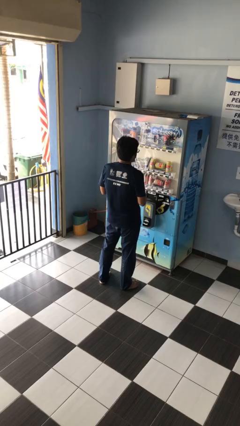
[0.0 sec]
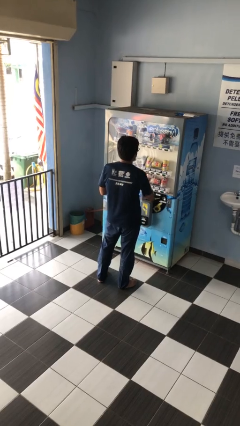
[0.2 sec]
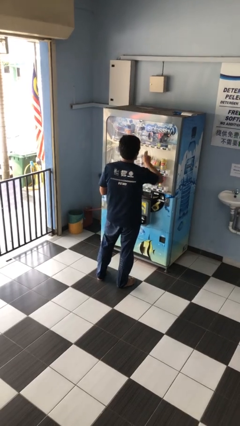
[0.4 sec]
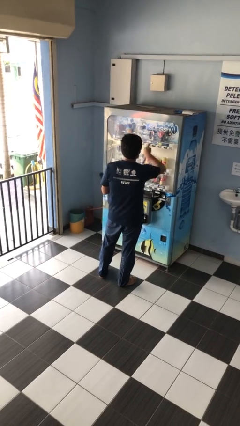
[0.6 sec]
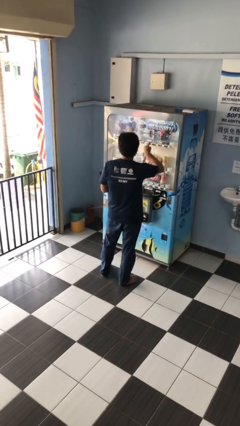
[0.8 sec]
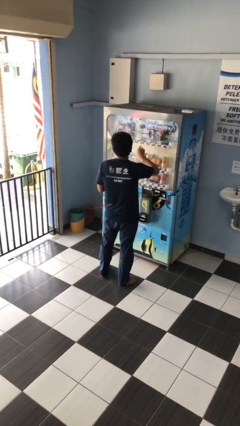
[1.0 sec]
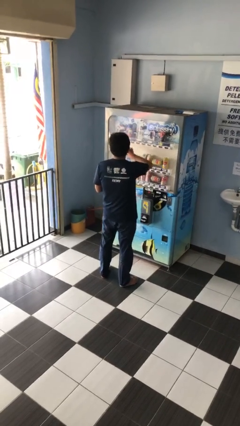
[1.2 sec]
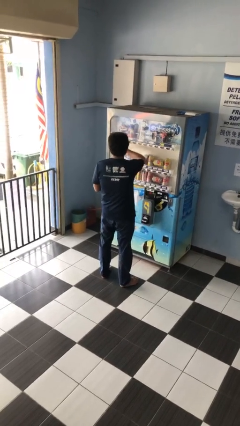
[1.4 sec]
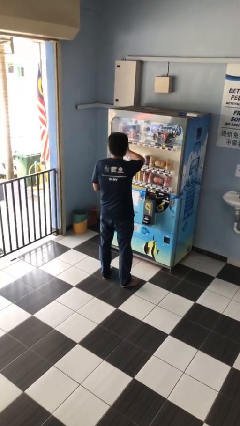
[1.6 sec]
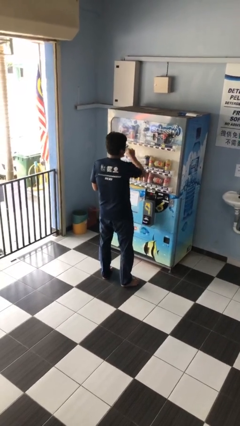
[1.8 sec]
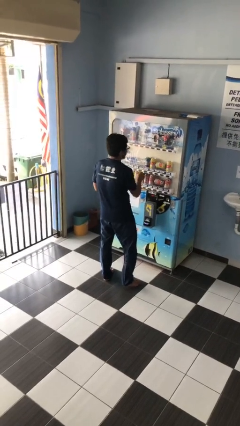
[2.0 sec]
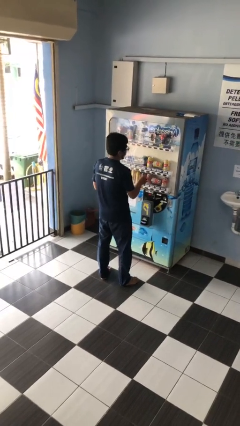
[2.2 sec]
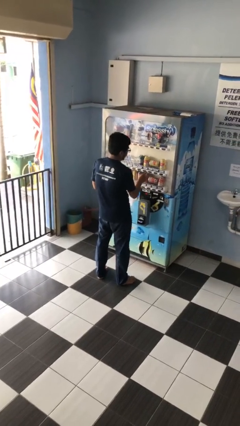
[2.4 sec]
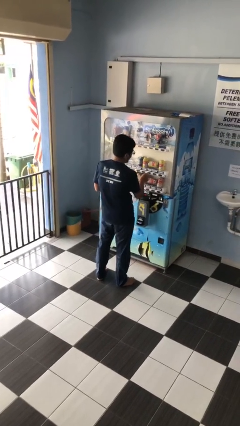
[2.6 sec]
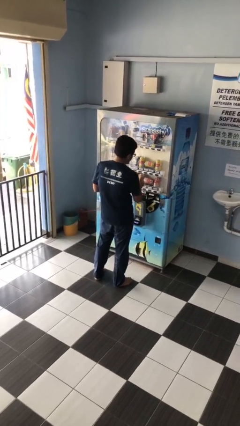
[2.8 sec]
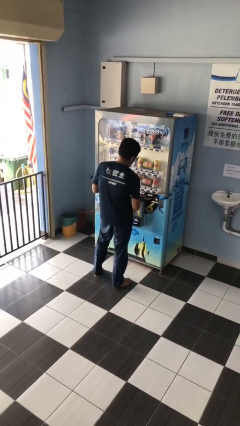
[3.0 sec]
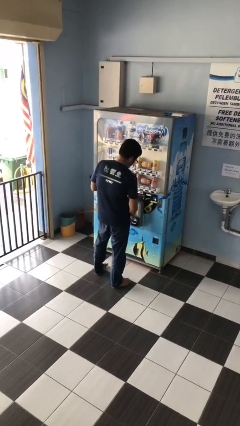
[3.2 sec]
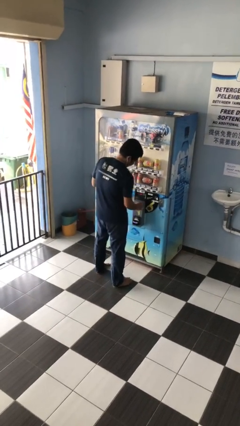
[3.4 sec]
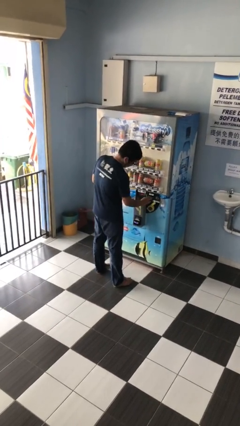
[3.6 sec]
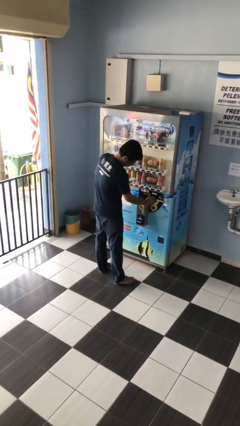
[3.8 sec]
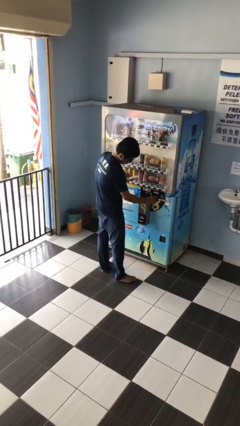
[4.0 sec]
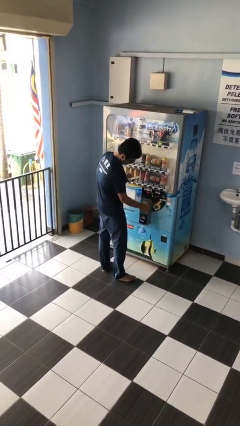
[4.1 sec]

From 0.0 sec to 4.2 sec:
person purchases from machine

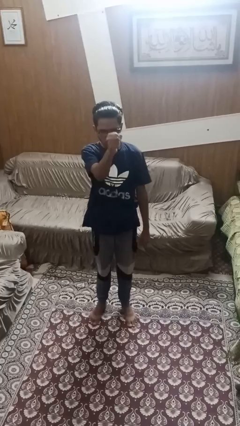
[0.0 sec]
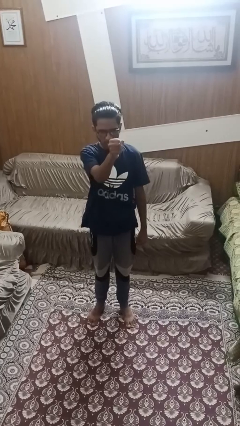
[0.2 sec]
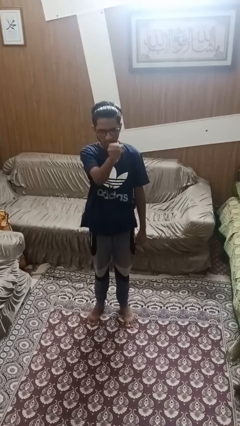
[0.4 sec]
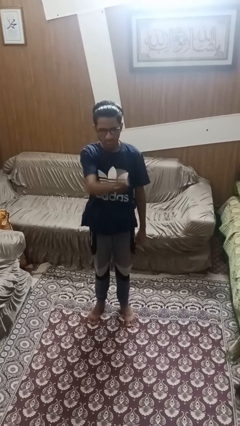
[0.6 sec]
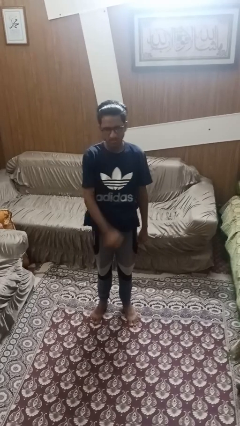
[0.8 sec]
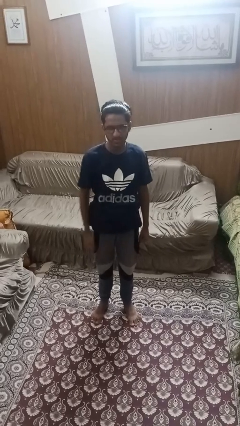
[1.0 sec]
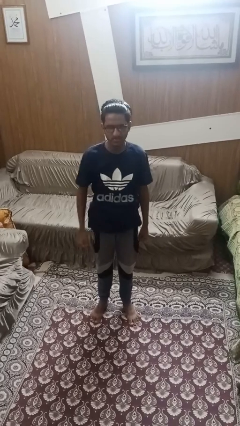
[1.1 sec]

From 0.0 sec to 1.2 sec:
person punches

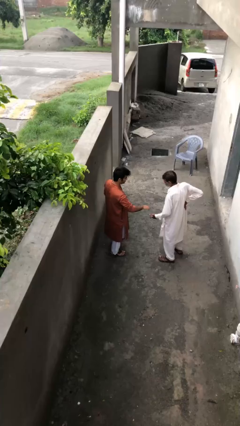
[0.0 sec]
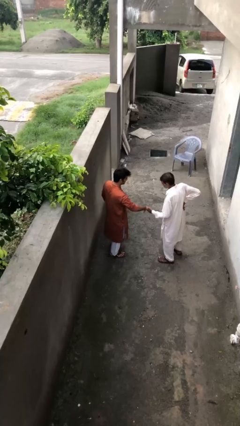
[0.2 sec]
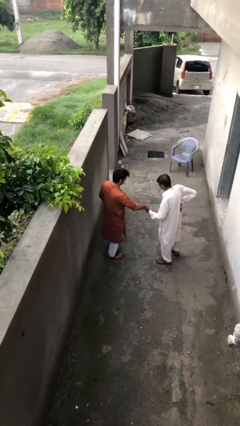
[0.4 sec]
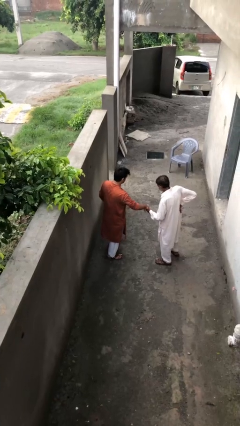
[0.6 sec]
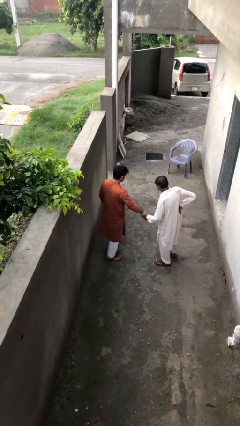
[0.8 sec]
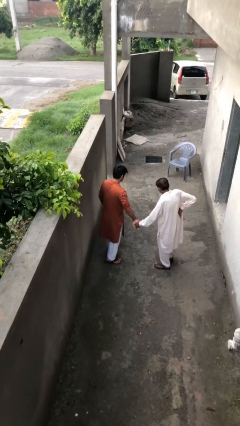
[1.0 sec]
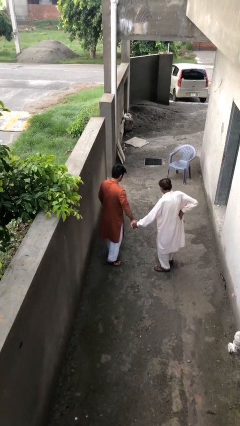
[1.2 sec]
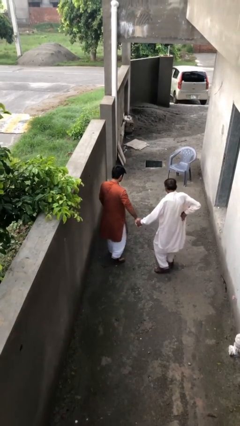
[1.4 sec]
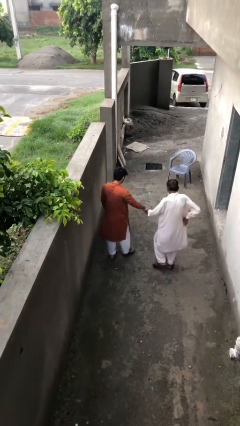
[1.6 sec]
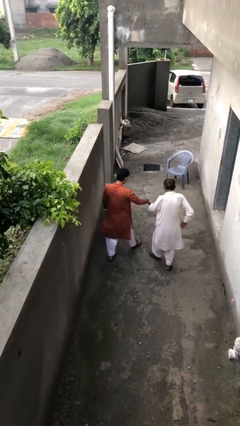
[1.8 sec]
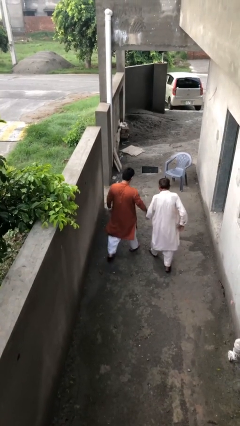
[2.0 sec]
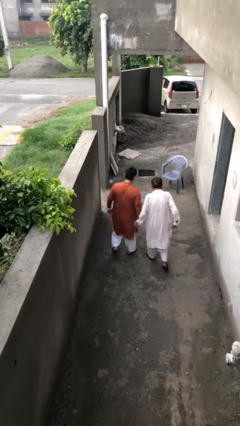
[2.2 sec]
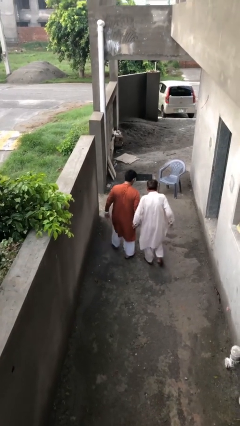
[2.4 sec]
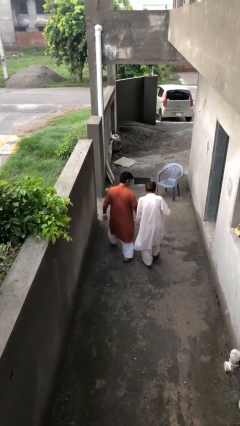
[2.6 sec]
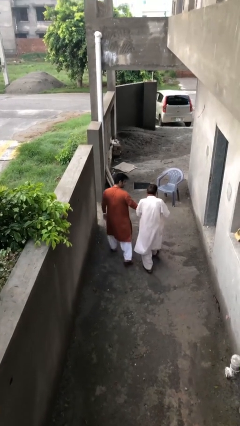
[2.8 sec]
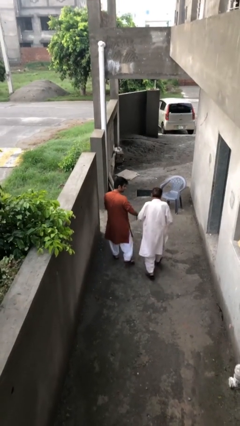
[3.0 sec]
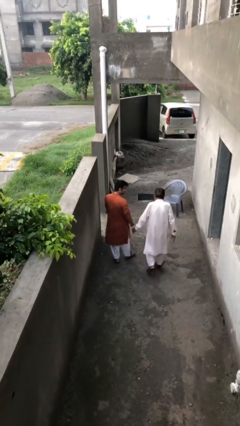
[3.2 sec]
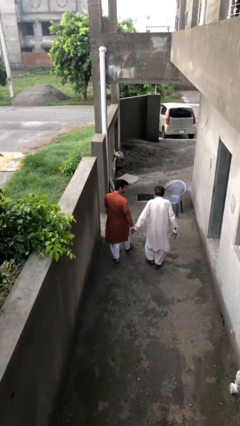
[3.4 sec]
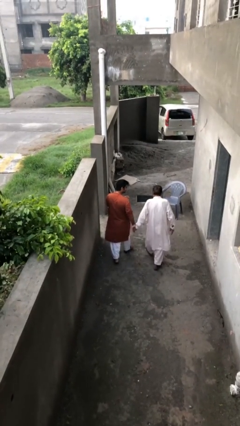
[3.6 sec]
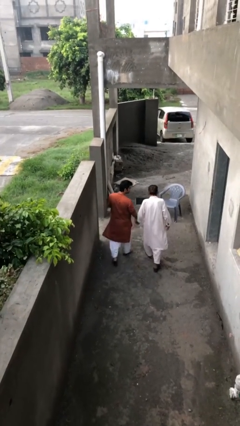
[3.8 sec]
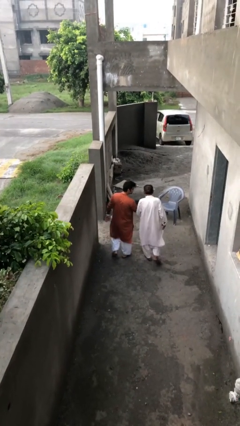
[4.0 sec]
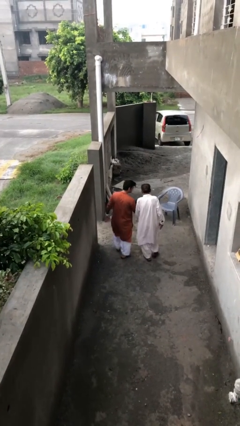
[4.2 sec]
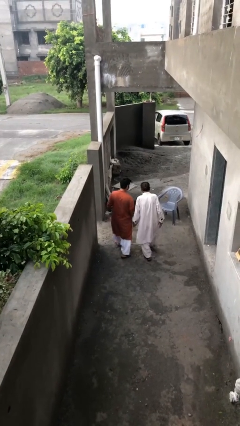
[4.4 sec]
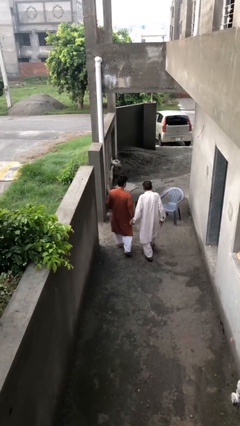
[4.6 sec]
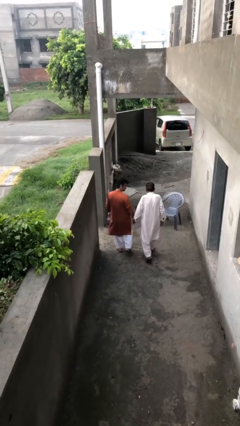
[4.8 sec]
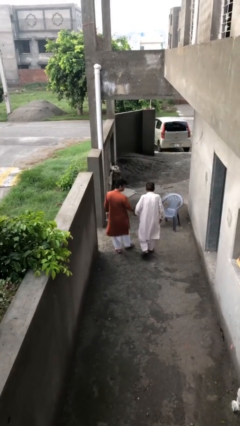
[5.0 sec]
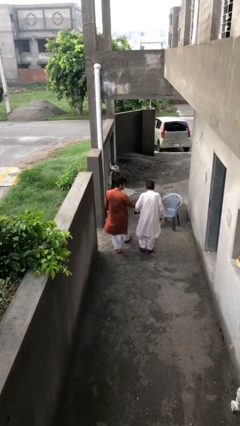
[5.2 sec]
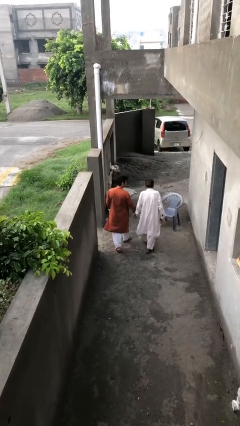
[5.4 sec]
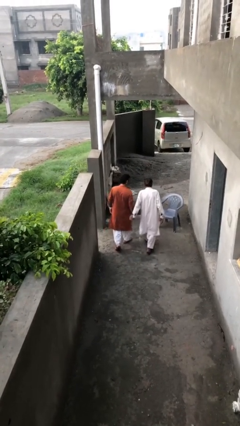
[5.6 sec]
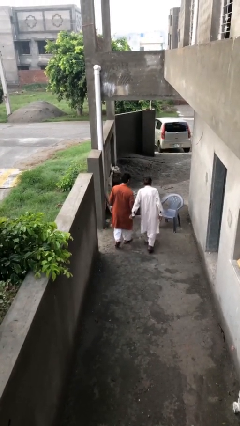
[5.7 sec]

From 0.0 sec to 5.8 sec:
person holds hand

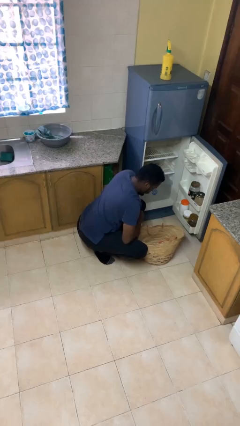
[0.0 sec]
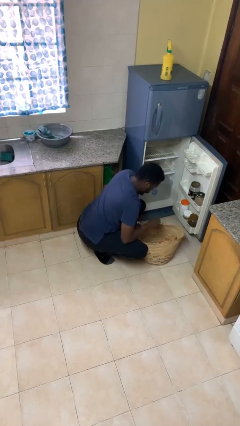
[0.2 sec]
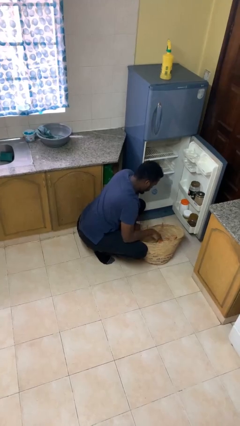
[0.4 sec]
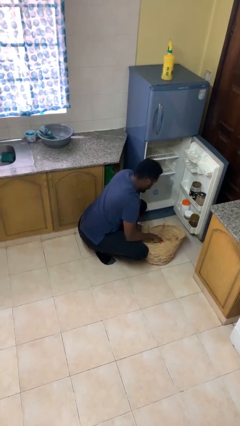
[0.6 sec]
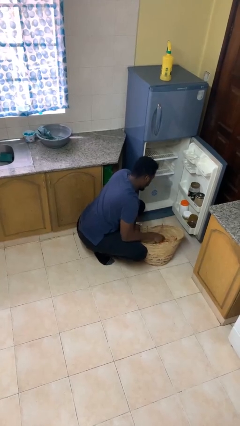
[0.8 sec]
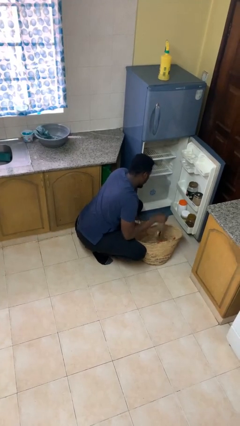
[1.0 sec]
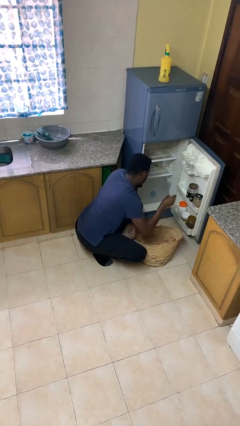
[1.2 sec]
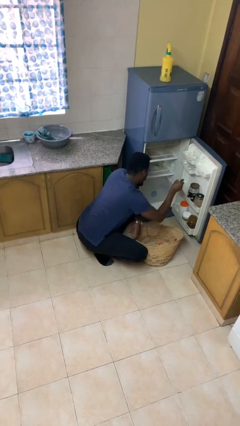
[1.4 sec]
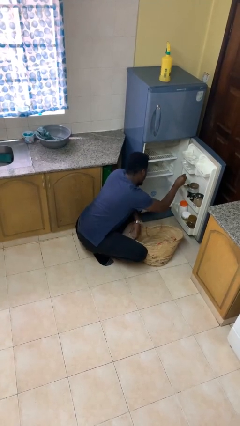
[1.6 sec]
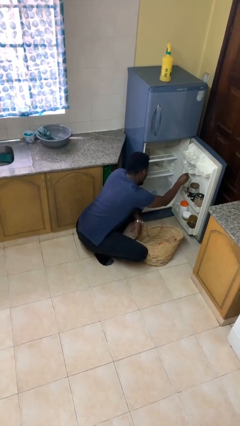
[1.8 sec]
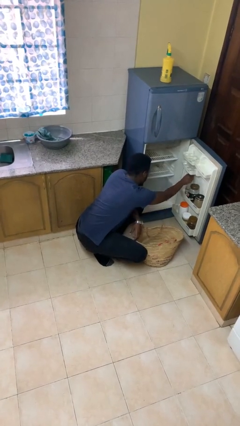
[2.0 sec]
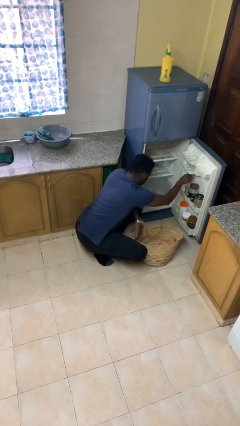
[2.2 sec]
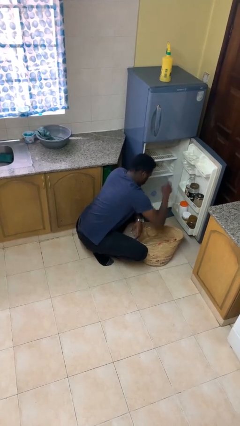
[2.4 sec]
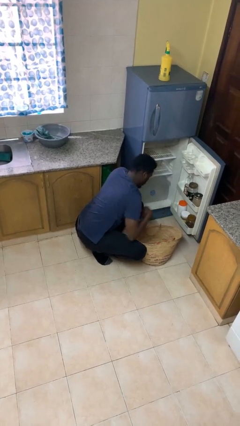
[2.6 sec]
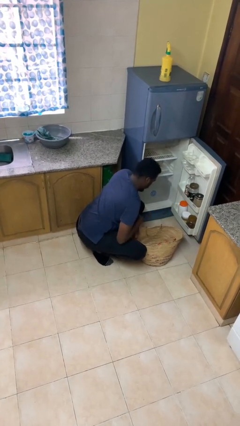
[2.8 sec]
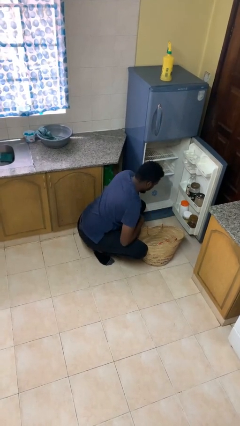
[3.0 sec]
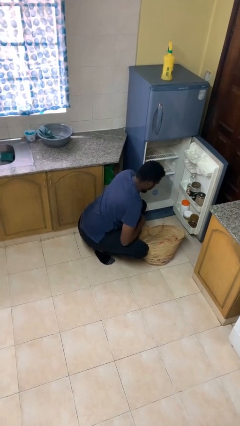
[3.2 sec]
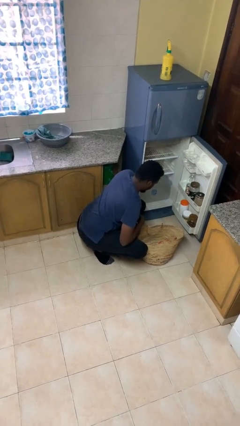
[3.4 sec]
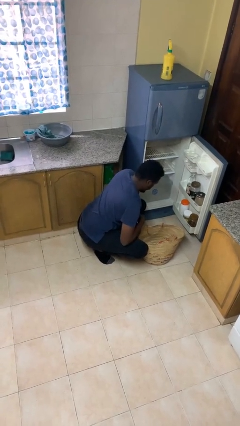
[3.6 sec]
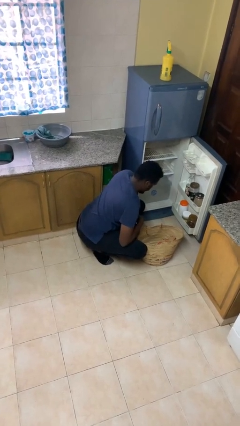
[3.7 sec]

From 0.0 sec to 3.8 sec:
person loads groceries into refrigerator

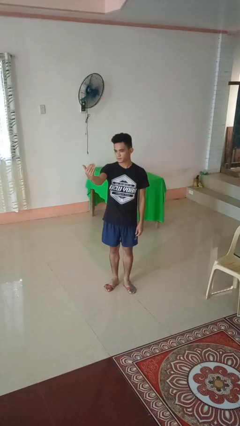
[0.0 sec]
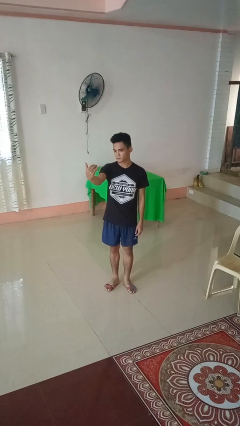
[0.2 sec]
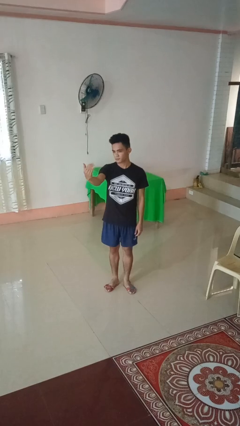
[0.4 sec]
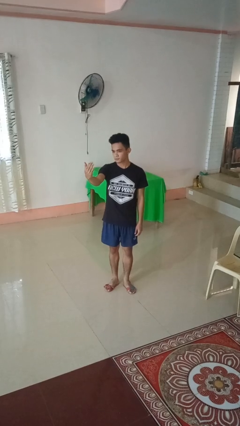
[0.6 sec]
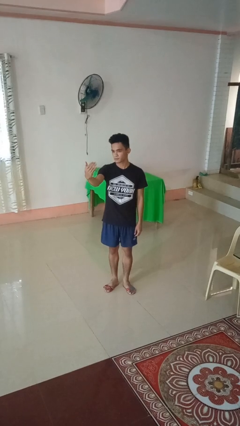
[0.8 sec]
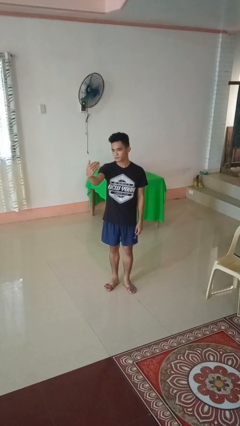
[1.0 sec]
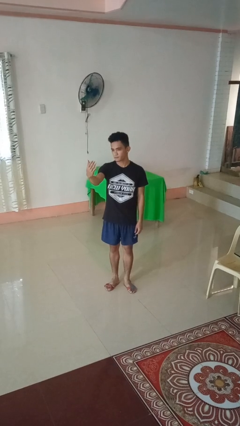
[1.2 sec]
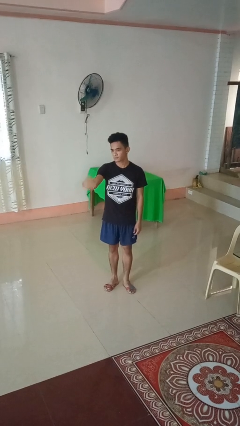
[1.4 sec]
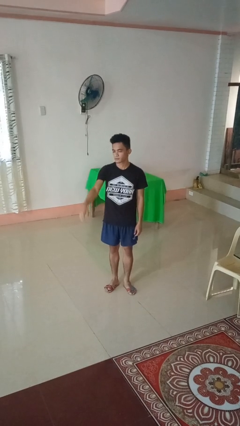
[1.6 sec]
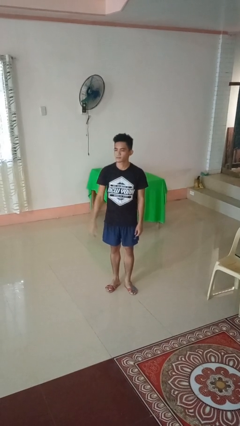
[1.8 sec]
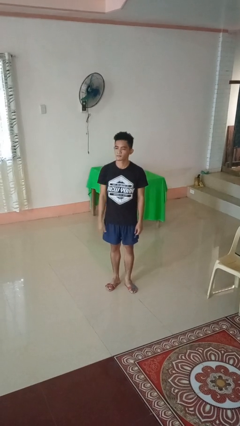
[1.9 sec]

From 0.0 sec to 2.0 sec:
person gestures come here

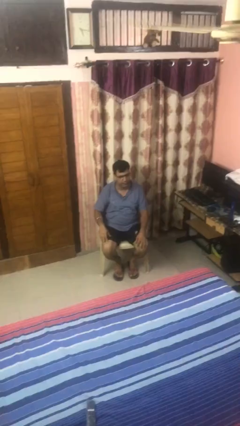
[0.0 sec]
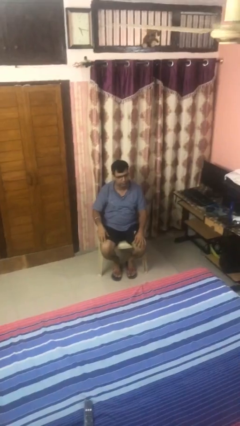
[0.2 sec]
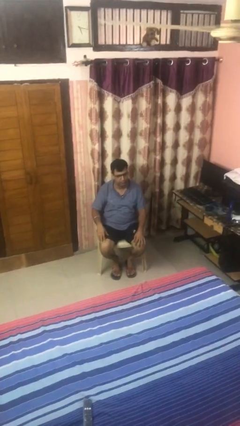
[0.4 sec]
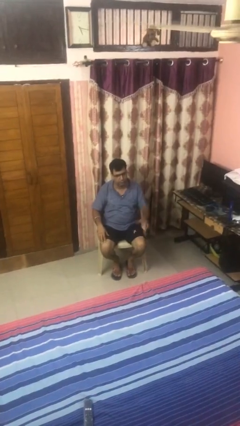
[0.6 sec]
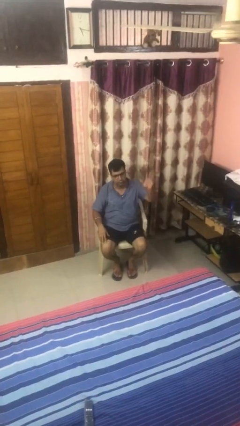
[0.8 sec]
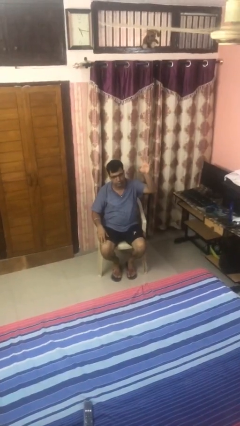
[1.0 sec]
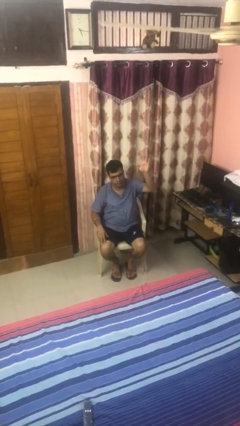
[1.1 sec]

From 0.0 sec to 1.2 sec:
person gestures raise hand
